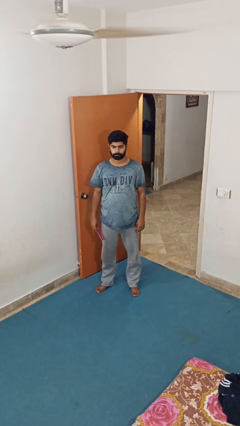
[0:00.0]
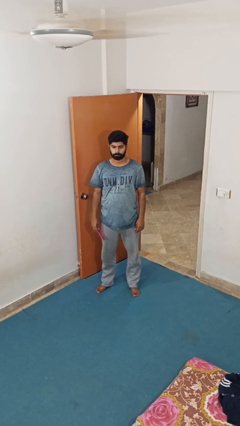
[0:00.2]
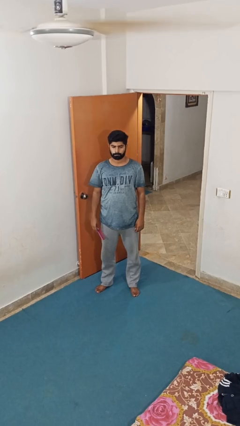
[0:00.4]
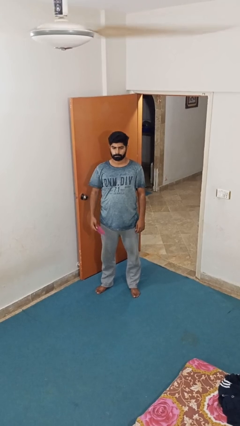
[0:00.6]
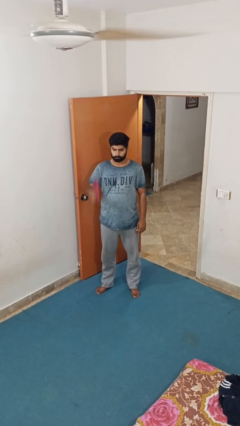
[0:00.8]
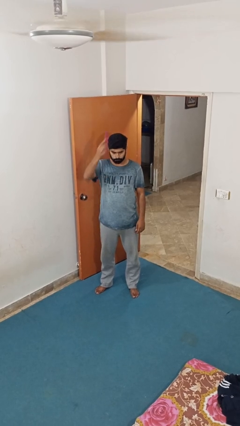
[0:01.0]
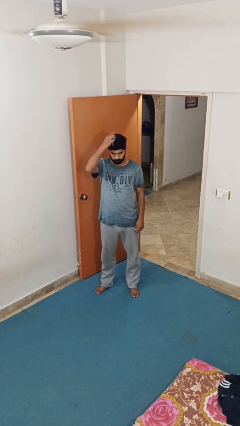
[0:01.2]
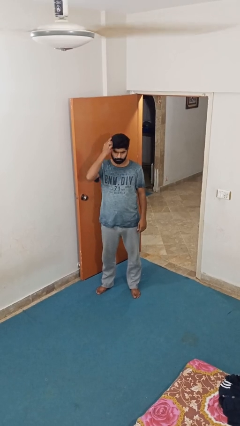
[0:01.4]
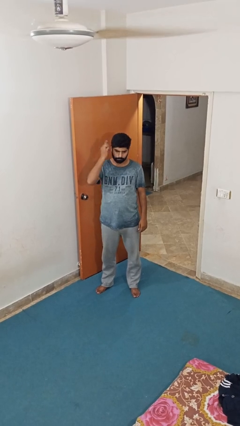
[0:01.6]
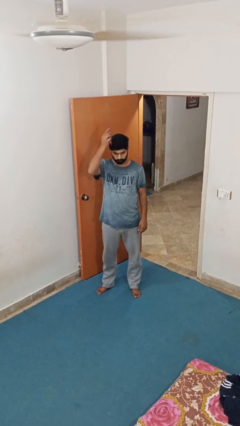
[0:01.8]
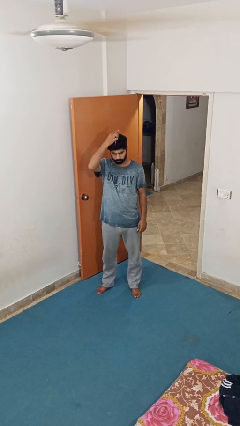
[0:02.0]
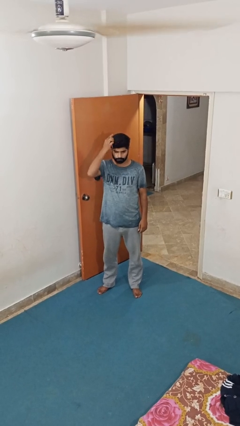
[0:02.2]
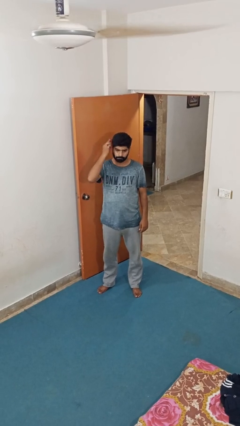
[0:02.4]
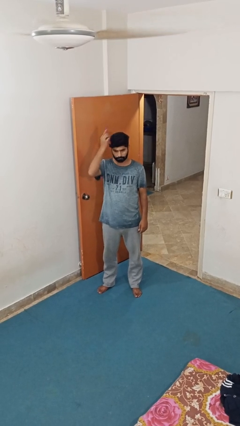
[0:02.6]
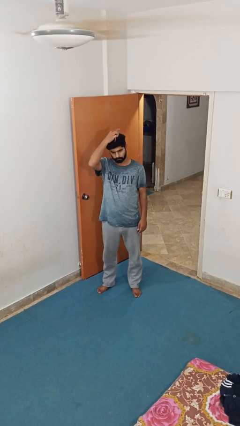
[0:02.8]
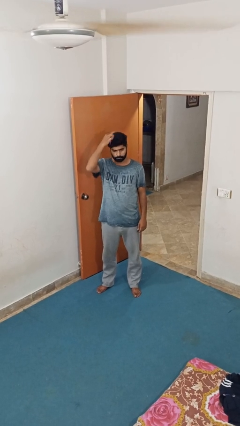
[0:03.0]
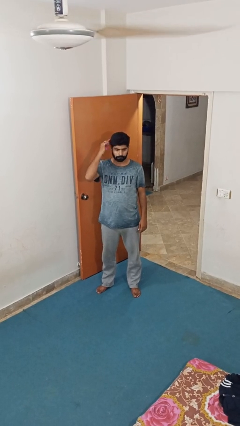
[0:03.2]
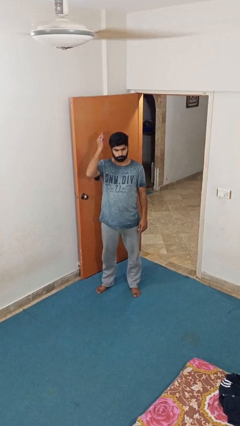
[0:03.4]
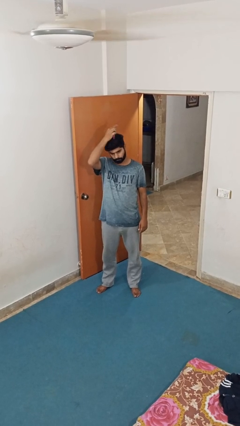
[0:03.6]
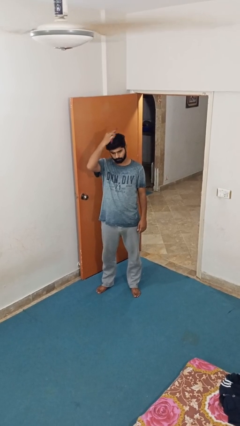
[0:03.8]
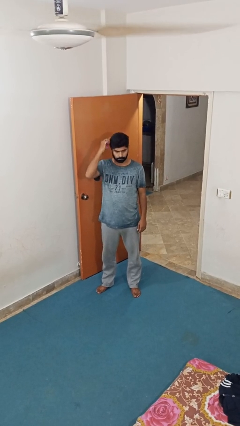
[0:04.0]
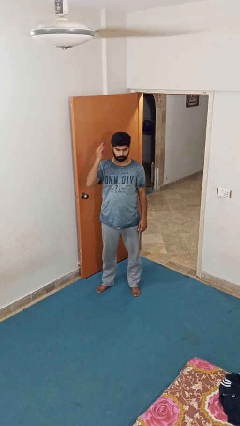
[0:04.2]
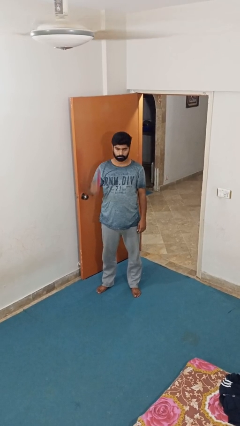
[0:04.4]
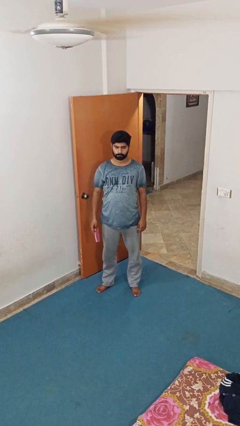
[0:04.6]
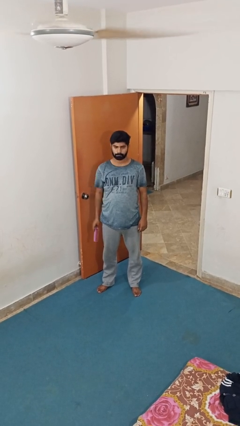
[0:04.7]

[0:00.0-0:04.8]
person brushes hair

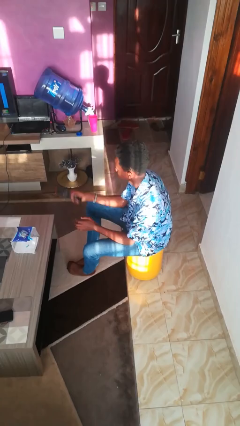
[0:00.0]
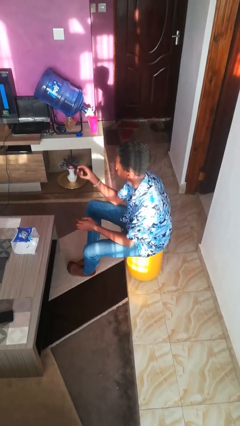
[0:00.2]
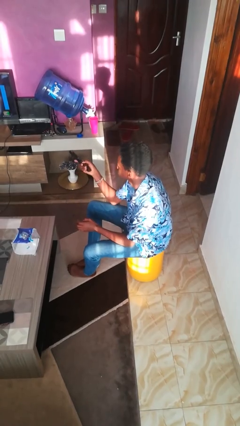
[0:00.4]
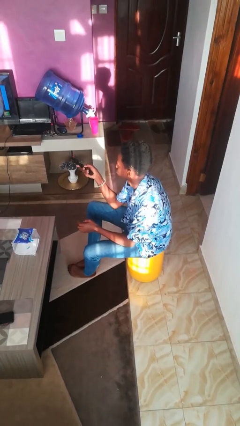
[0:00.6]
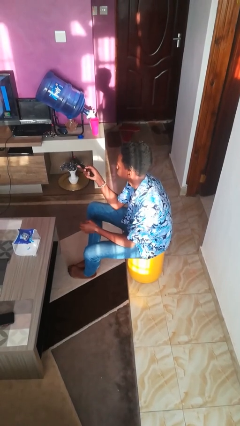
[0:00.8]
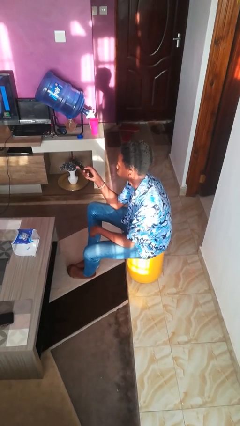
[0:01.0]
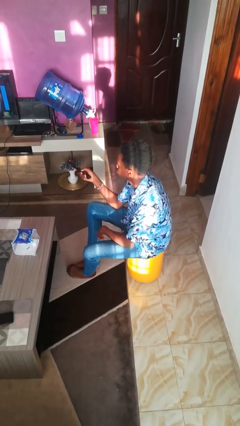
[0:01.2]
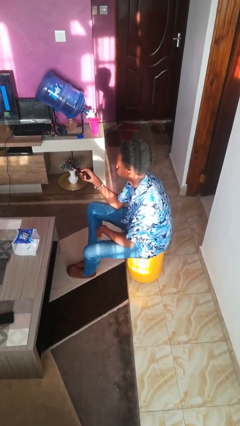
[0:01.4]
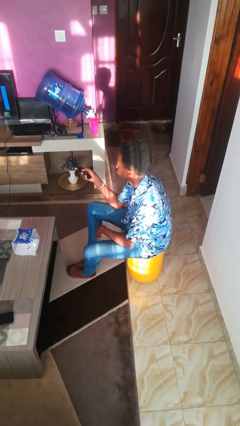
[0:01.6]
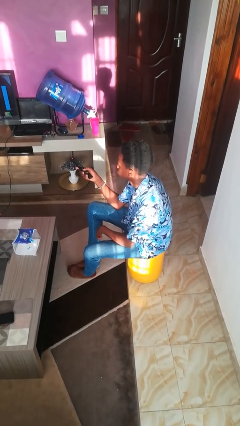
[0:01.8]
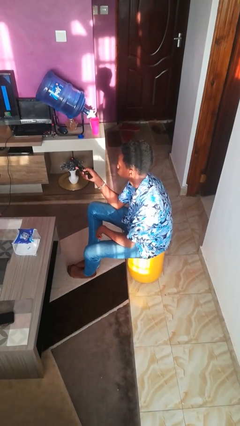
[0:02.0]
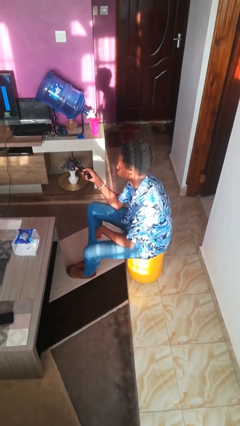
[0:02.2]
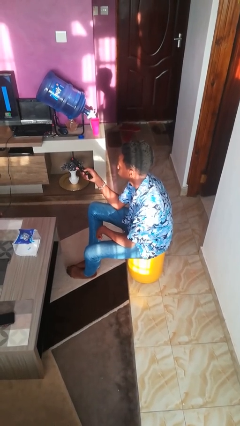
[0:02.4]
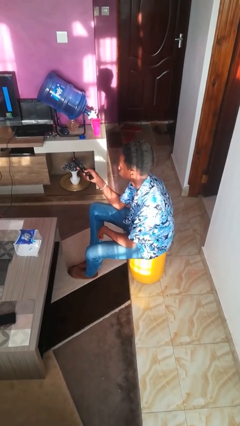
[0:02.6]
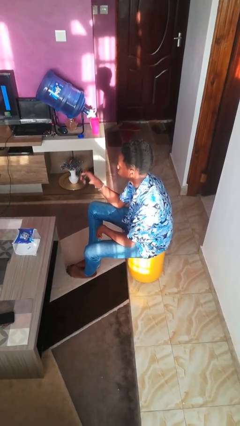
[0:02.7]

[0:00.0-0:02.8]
person uses television remote

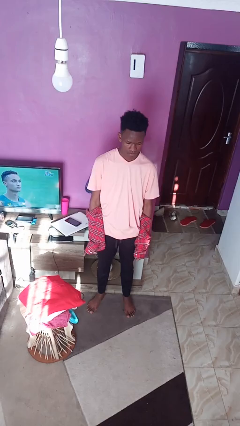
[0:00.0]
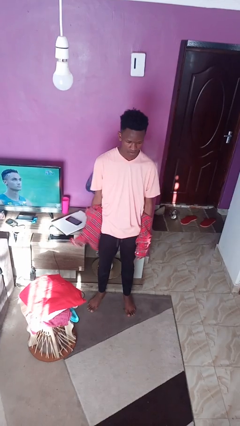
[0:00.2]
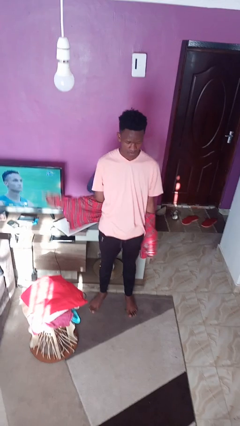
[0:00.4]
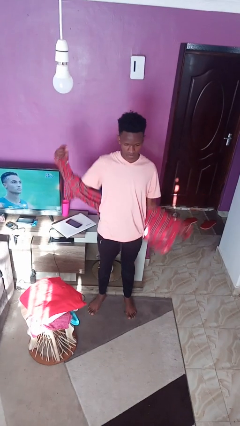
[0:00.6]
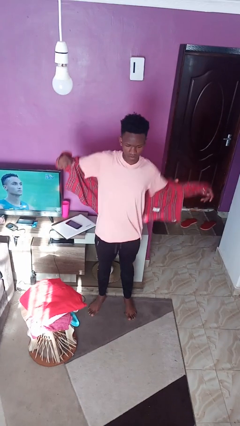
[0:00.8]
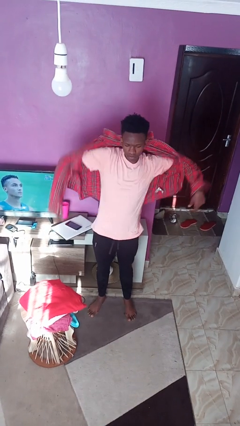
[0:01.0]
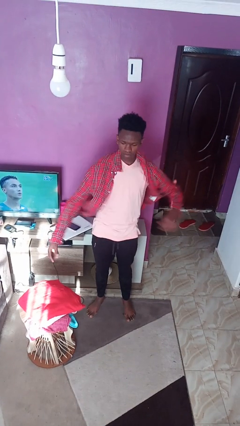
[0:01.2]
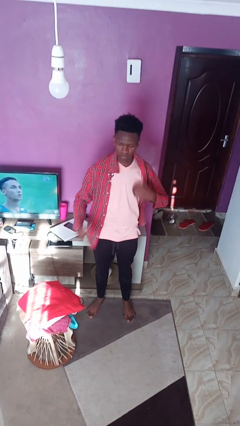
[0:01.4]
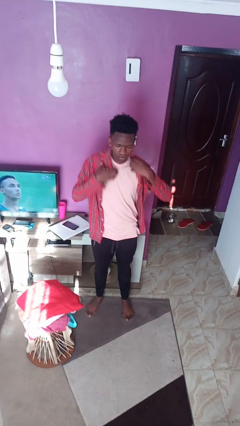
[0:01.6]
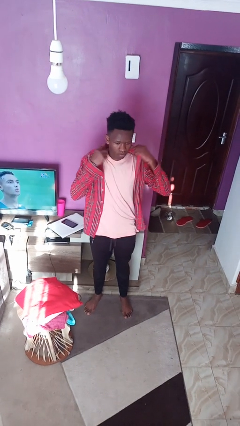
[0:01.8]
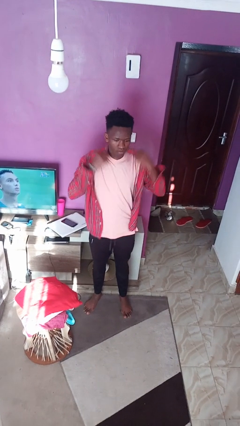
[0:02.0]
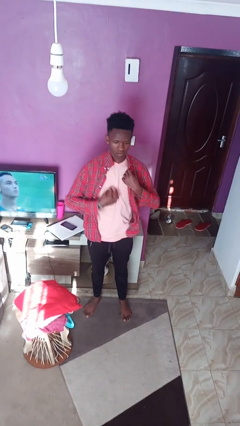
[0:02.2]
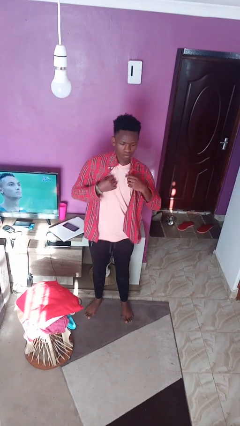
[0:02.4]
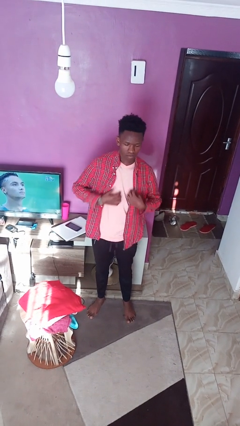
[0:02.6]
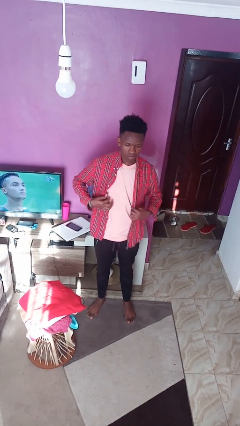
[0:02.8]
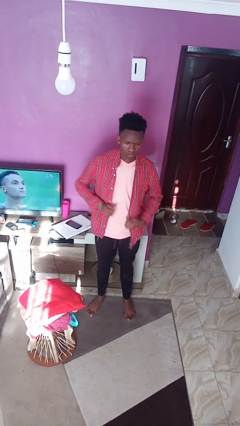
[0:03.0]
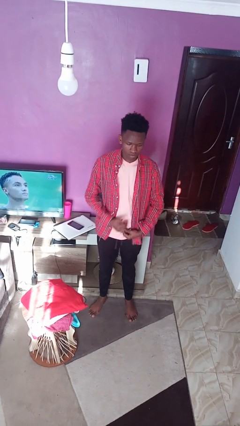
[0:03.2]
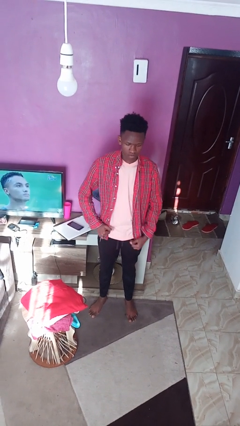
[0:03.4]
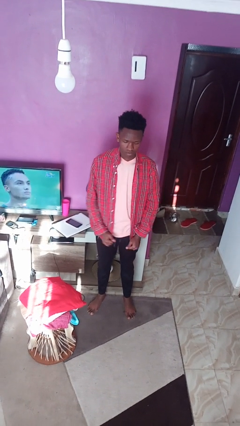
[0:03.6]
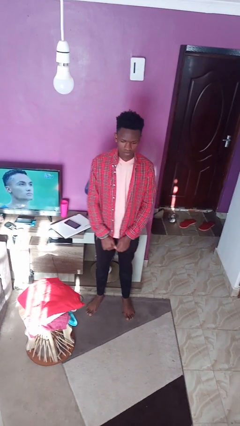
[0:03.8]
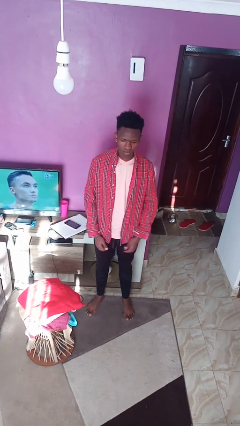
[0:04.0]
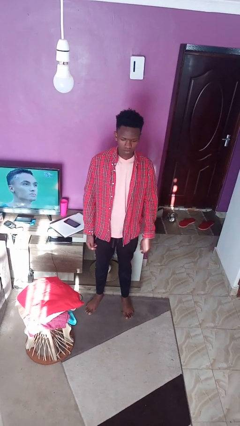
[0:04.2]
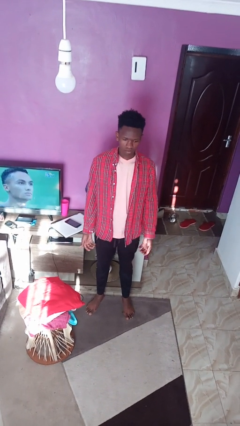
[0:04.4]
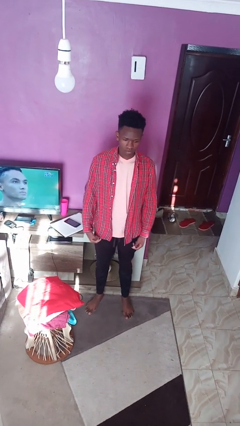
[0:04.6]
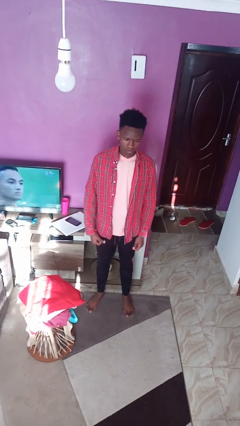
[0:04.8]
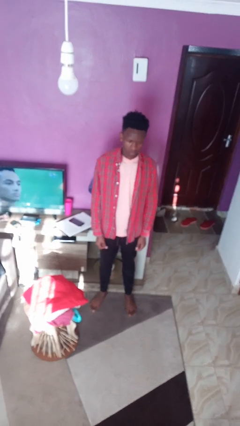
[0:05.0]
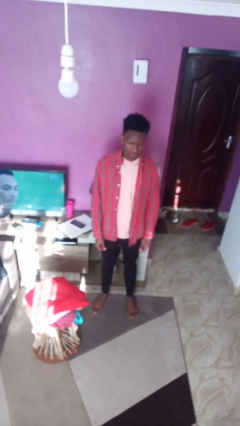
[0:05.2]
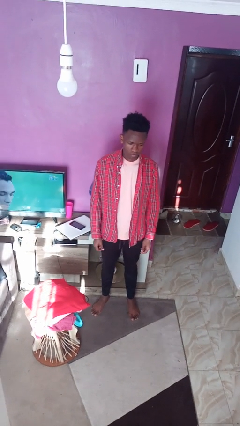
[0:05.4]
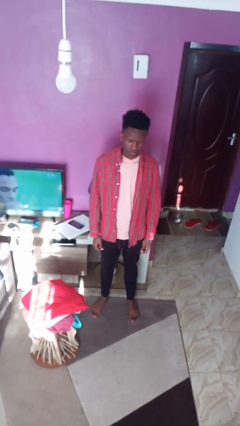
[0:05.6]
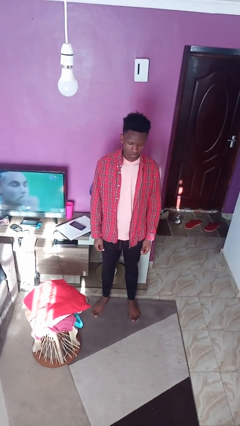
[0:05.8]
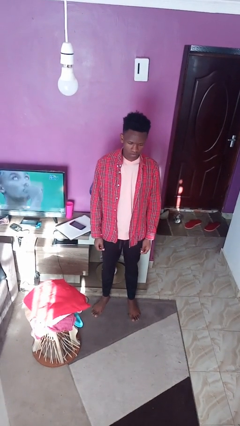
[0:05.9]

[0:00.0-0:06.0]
person puts on shirt

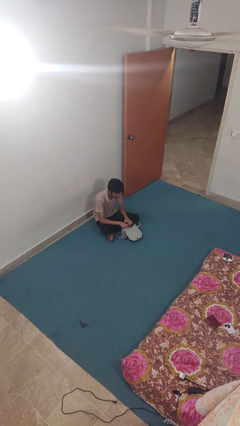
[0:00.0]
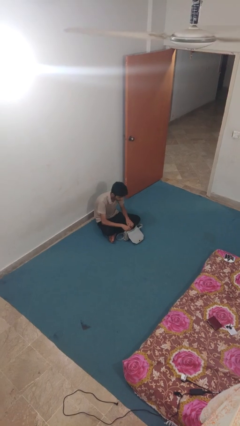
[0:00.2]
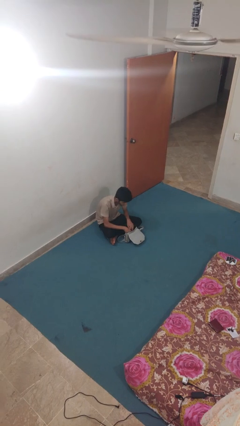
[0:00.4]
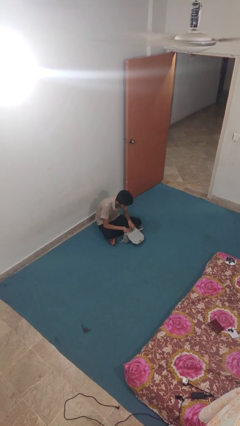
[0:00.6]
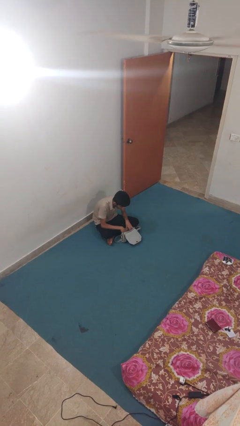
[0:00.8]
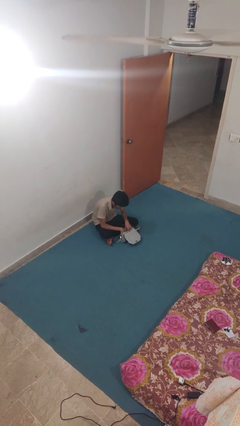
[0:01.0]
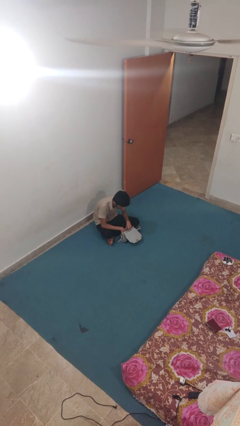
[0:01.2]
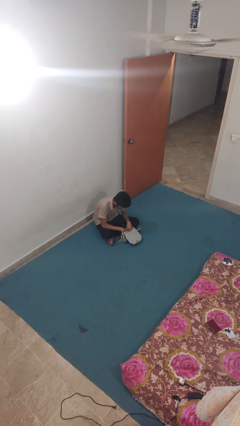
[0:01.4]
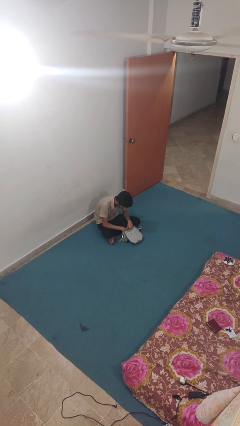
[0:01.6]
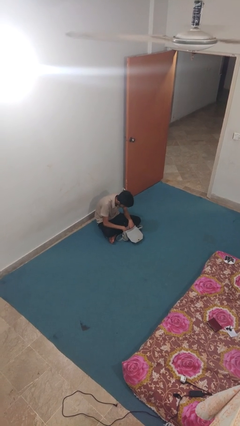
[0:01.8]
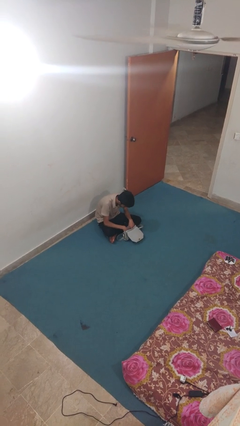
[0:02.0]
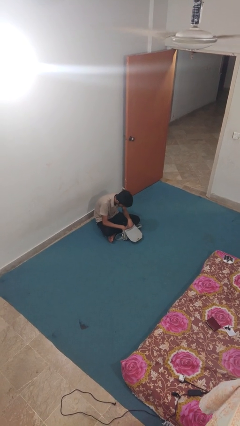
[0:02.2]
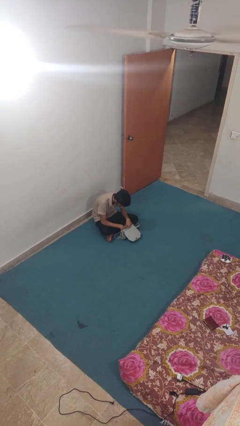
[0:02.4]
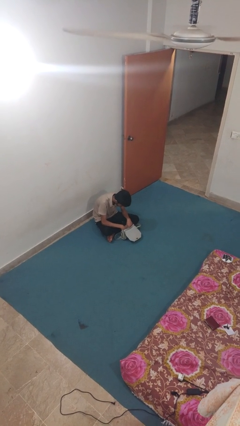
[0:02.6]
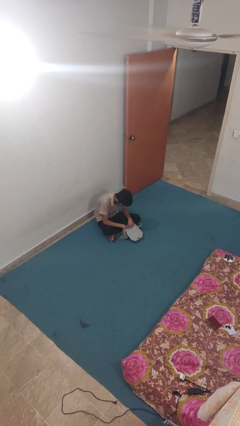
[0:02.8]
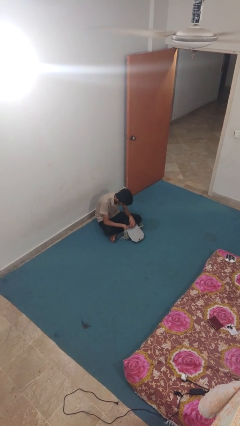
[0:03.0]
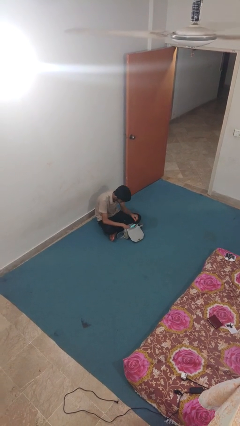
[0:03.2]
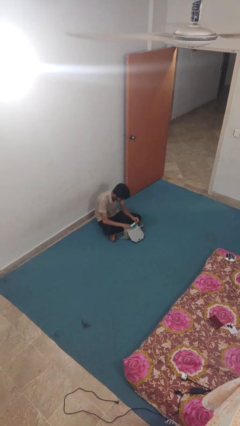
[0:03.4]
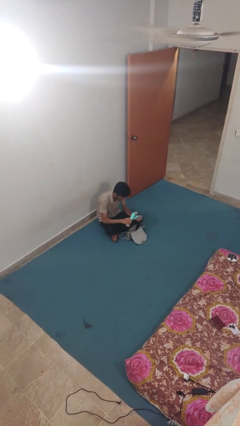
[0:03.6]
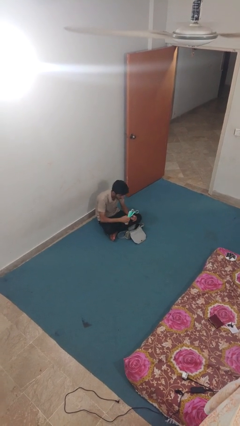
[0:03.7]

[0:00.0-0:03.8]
person searches in purse

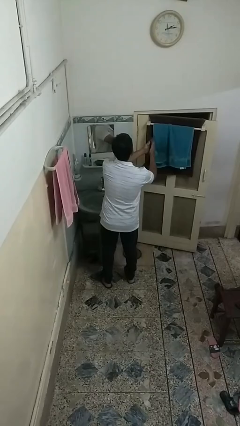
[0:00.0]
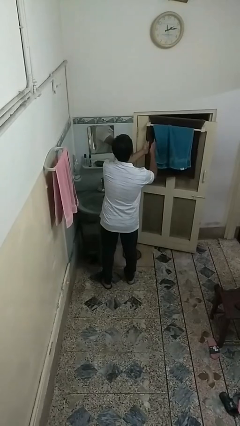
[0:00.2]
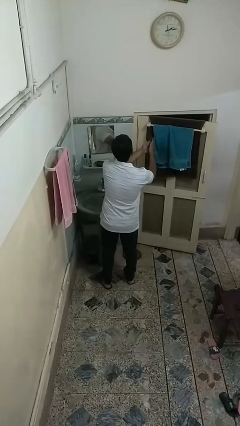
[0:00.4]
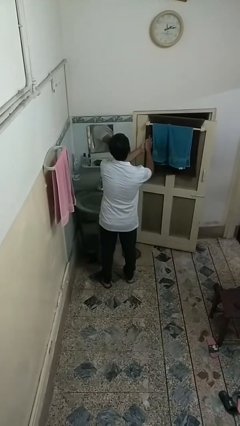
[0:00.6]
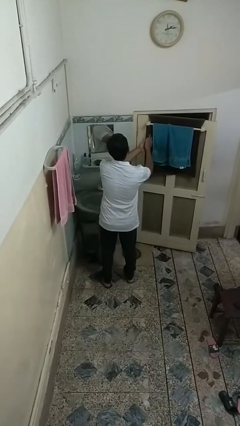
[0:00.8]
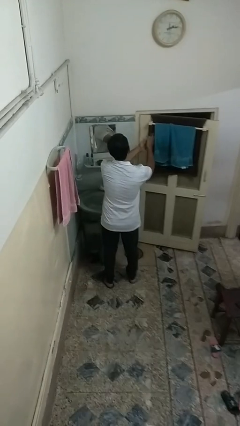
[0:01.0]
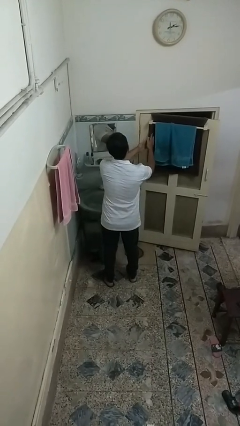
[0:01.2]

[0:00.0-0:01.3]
person dries hands with towel
